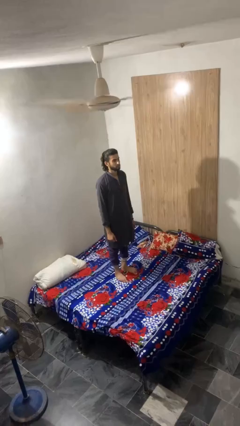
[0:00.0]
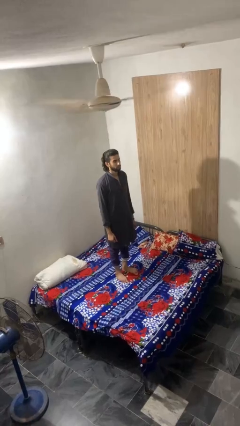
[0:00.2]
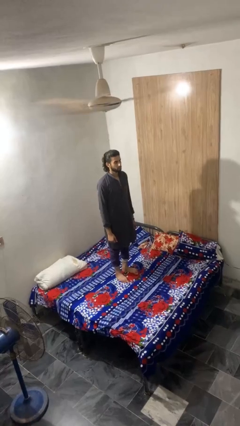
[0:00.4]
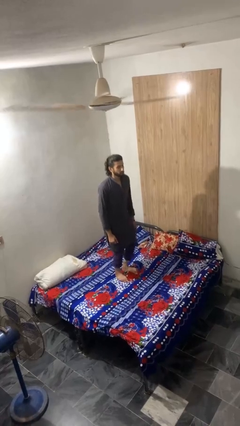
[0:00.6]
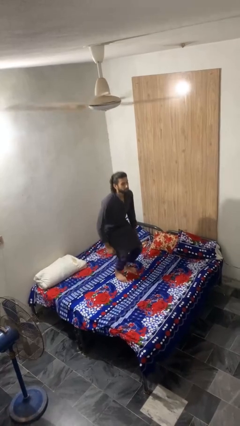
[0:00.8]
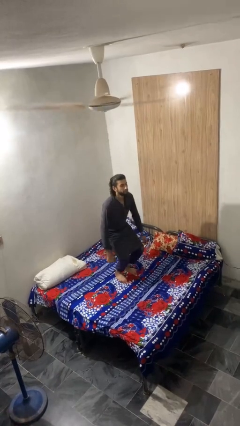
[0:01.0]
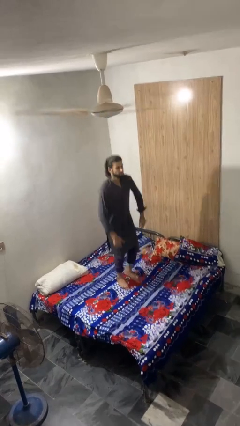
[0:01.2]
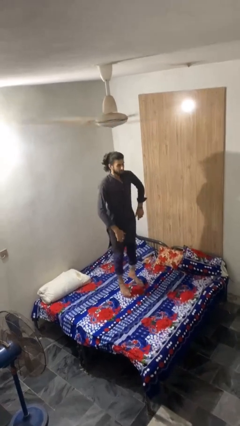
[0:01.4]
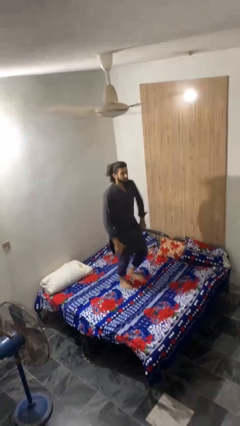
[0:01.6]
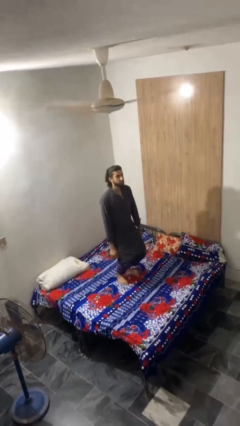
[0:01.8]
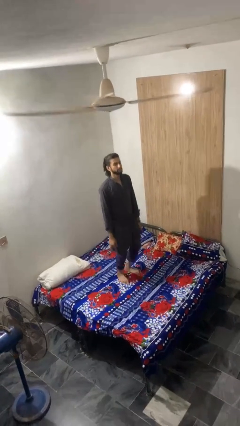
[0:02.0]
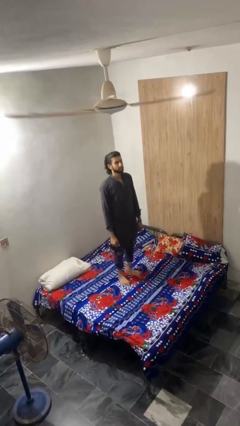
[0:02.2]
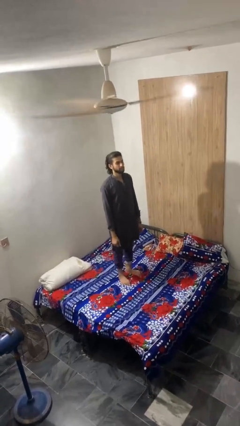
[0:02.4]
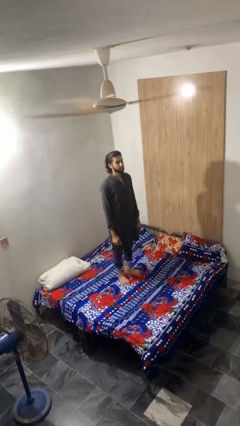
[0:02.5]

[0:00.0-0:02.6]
person jumps on bed

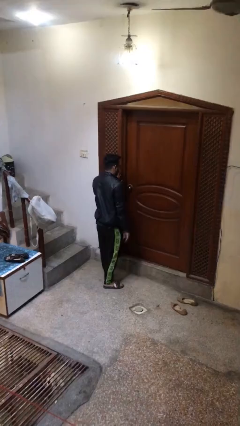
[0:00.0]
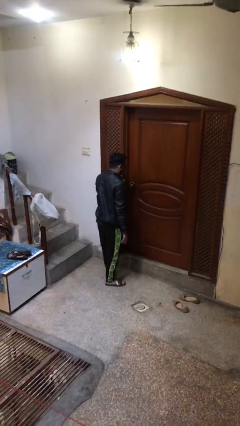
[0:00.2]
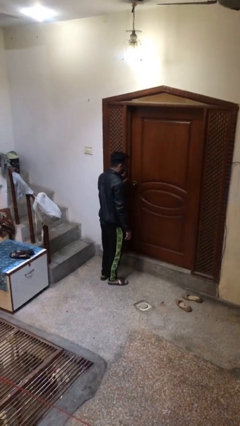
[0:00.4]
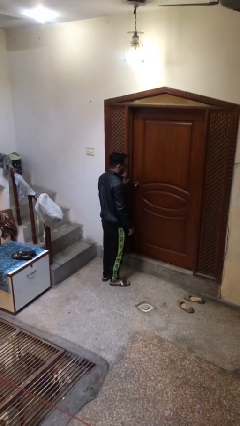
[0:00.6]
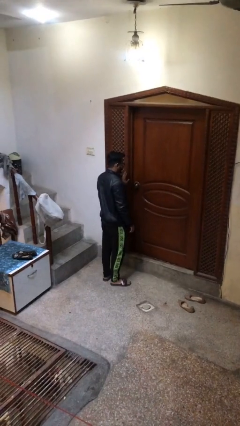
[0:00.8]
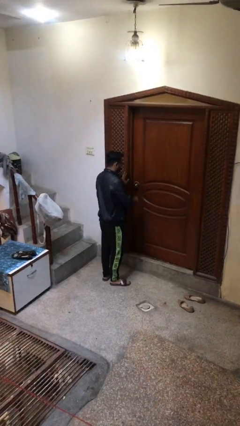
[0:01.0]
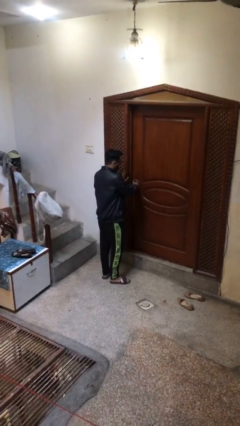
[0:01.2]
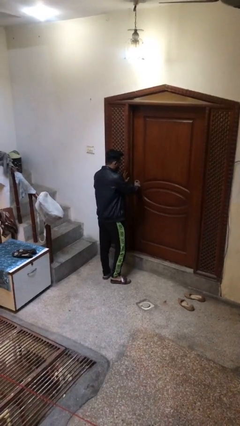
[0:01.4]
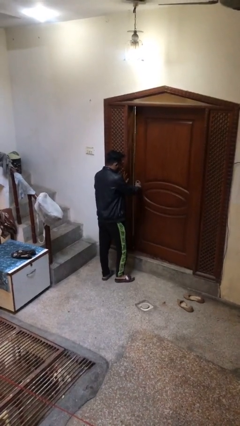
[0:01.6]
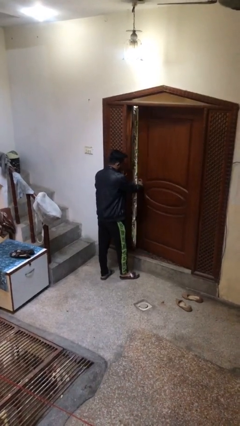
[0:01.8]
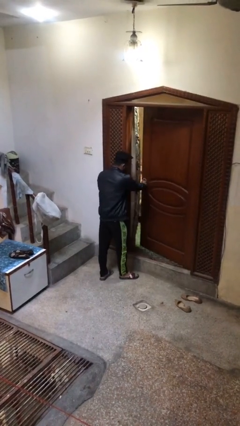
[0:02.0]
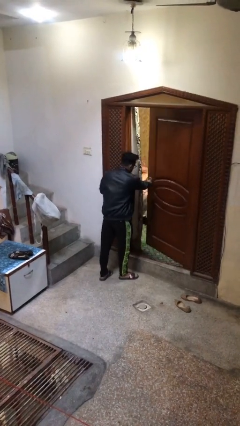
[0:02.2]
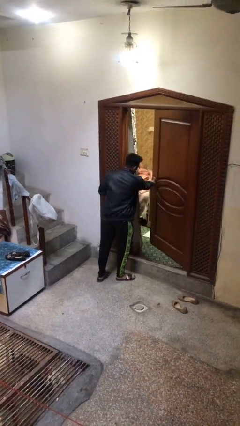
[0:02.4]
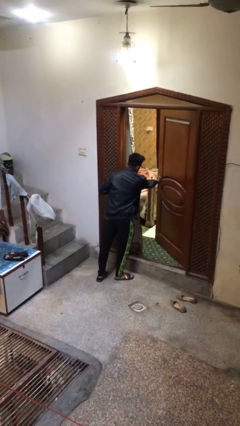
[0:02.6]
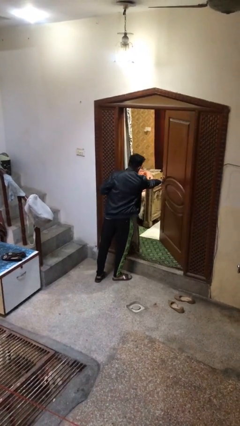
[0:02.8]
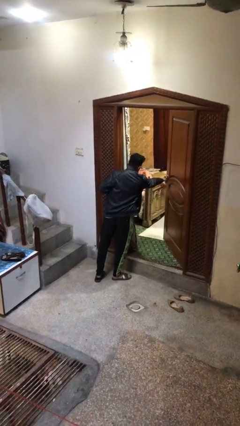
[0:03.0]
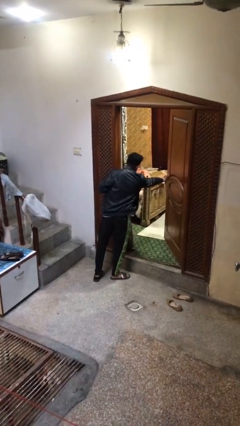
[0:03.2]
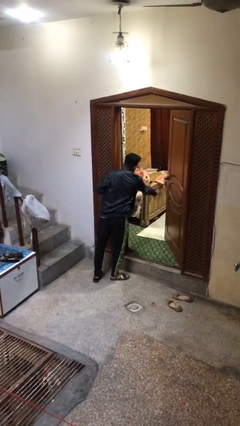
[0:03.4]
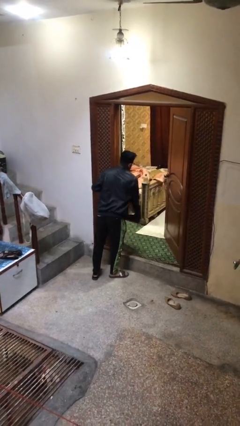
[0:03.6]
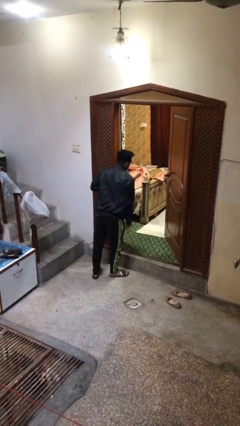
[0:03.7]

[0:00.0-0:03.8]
person opens facility door

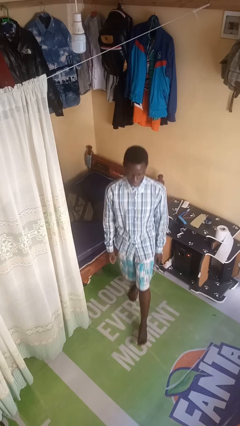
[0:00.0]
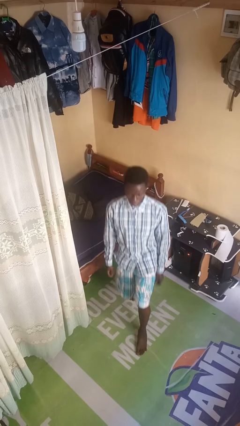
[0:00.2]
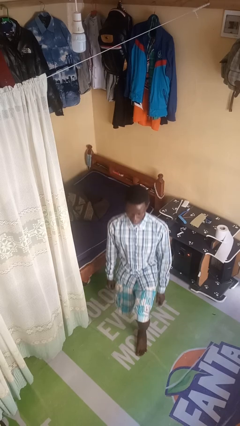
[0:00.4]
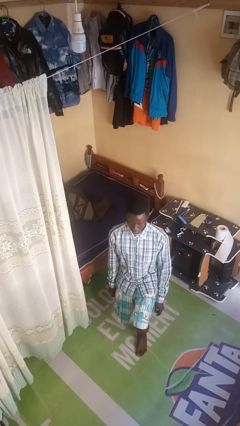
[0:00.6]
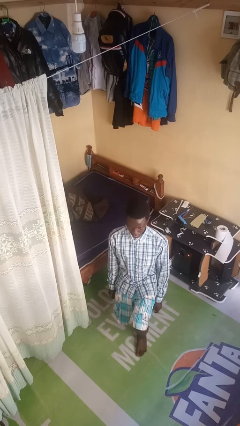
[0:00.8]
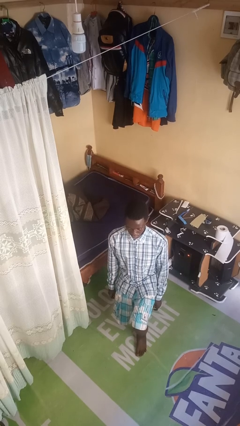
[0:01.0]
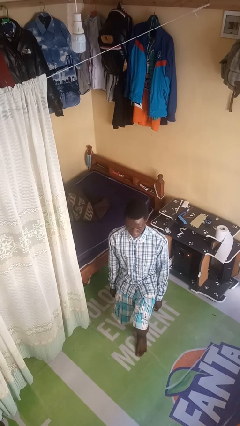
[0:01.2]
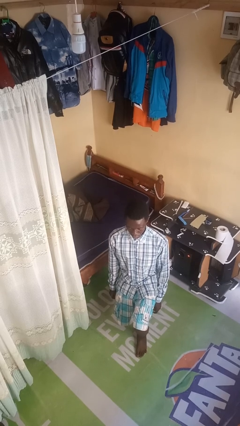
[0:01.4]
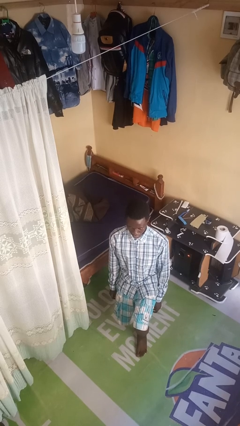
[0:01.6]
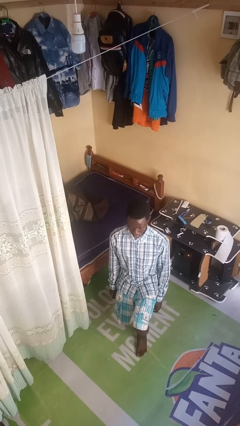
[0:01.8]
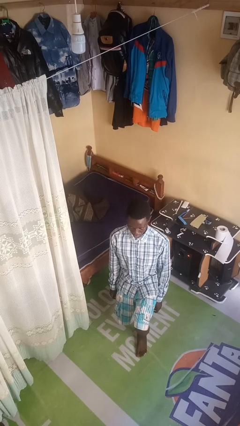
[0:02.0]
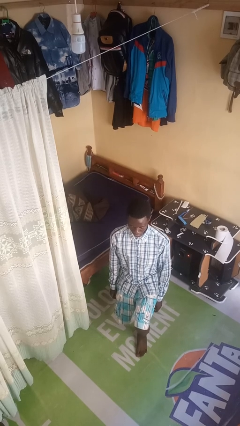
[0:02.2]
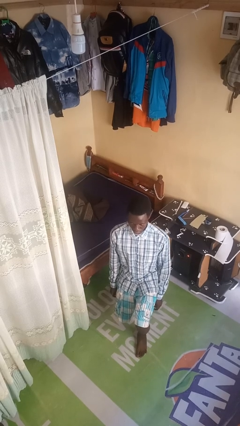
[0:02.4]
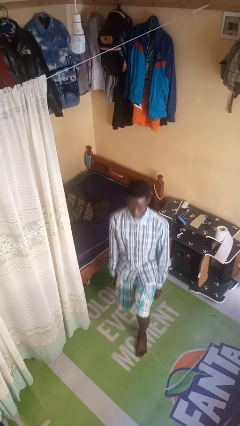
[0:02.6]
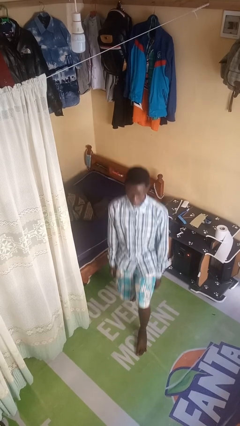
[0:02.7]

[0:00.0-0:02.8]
person exercises with lunges

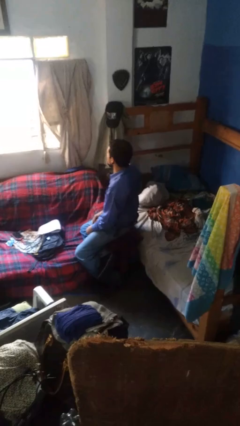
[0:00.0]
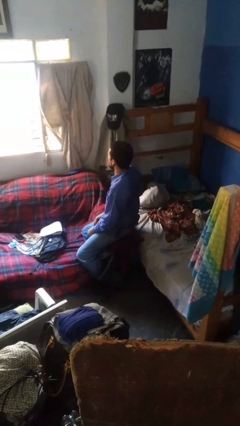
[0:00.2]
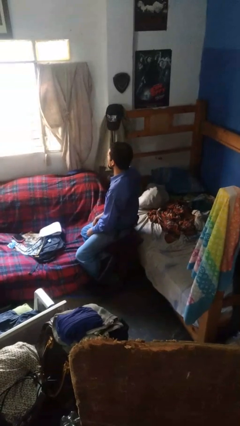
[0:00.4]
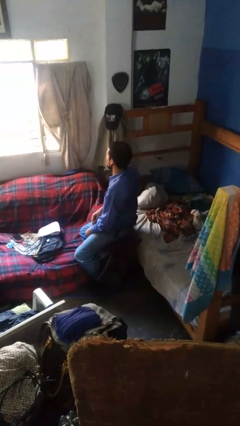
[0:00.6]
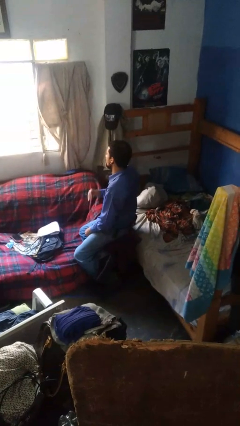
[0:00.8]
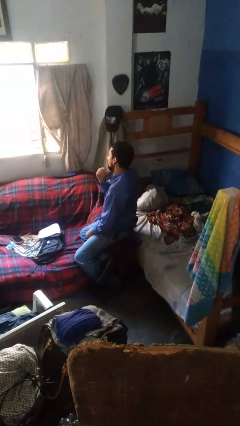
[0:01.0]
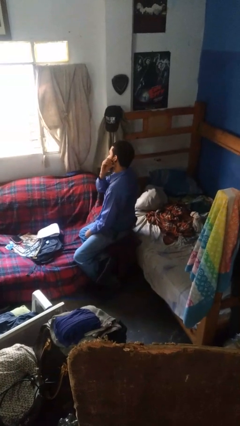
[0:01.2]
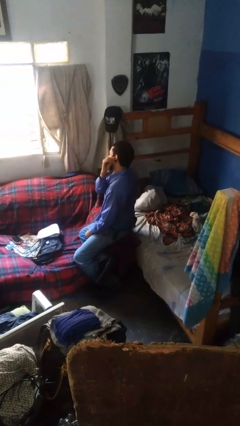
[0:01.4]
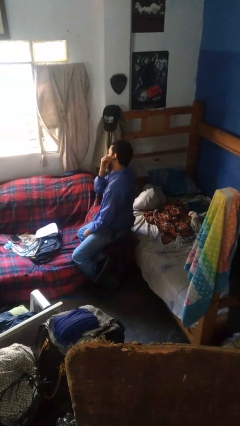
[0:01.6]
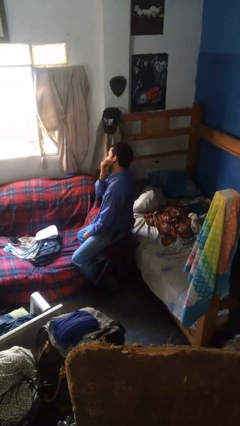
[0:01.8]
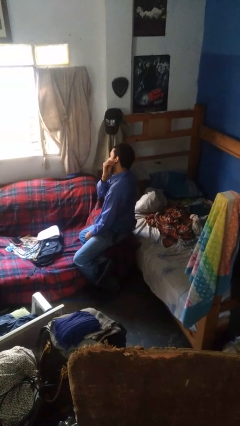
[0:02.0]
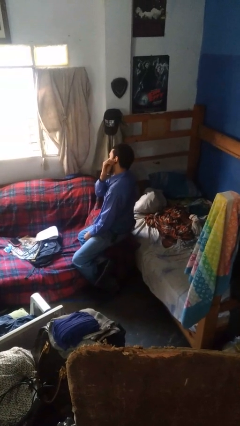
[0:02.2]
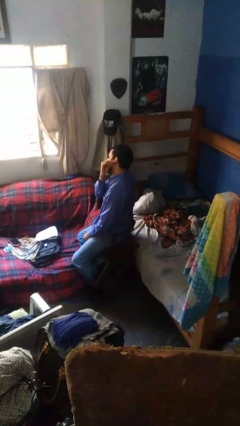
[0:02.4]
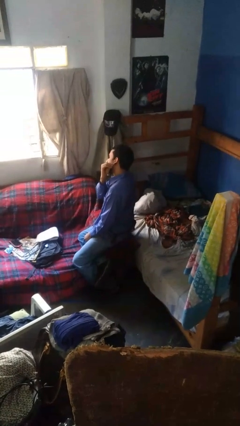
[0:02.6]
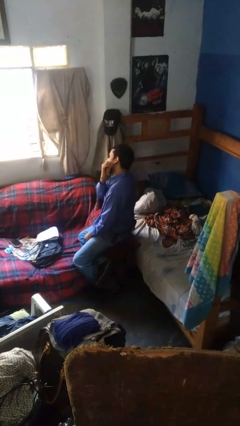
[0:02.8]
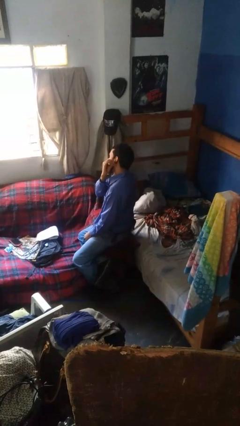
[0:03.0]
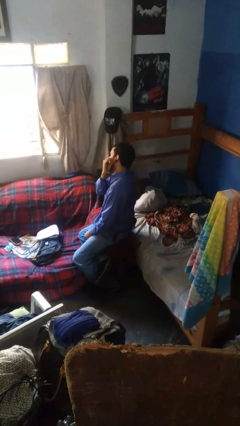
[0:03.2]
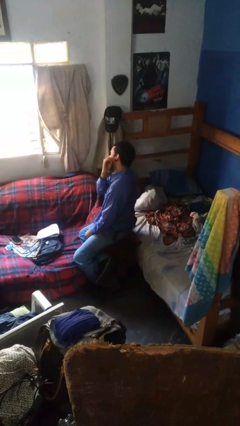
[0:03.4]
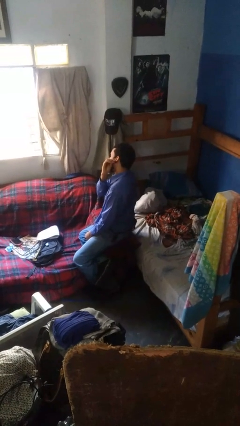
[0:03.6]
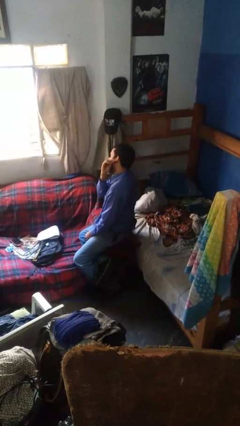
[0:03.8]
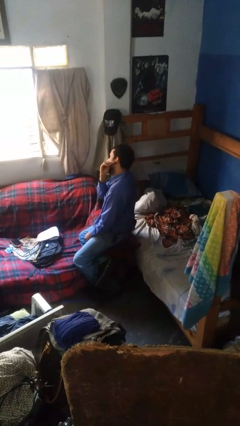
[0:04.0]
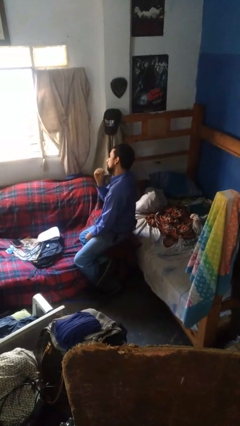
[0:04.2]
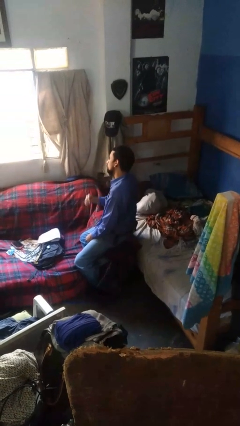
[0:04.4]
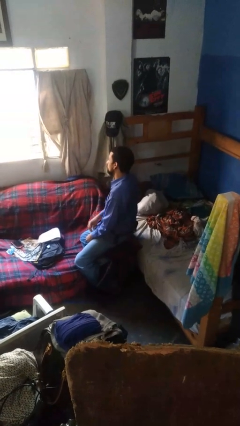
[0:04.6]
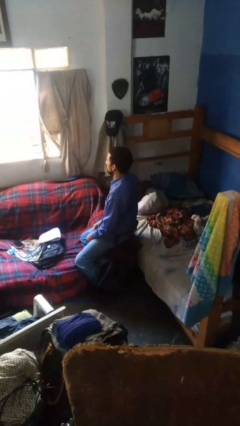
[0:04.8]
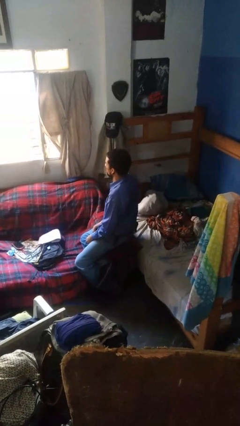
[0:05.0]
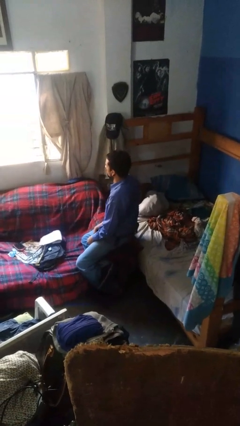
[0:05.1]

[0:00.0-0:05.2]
person touches earlobe

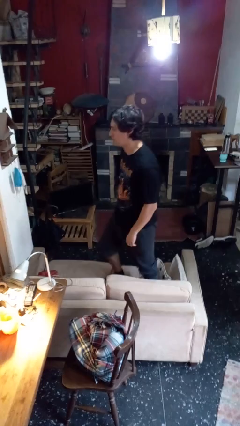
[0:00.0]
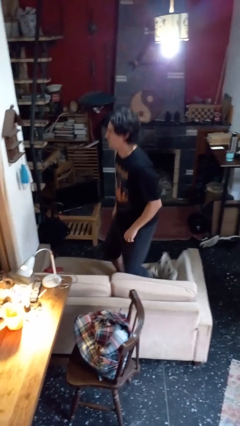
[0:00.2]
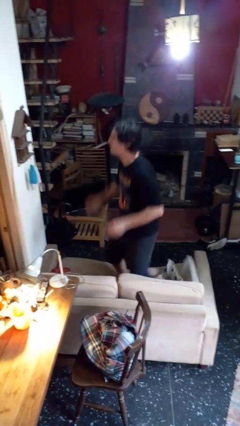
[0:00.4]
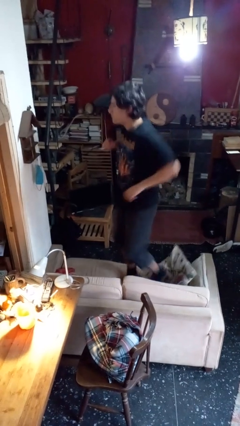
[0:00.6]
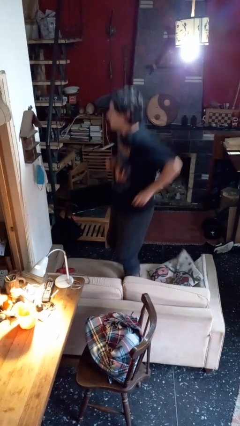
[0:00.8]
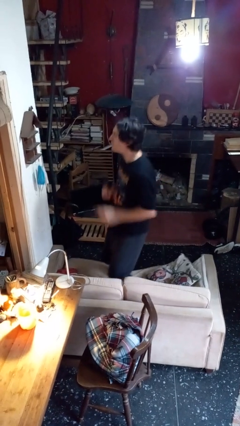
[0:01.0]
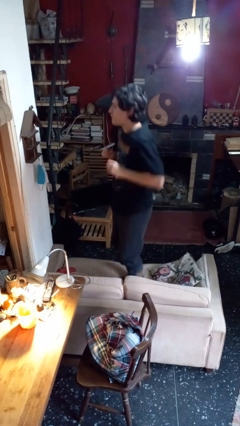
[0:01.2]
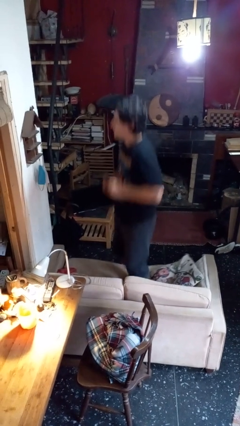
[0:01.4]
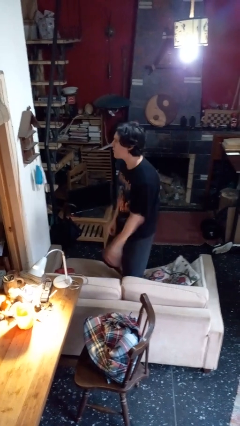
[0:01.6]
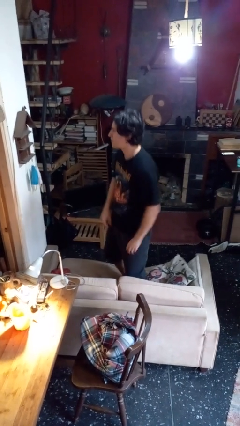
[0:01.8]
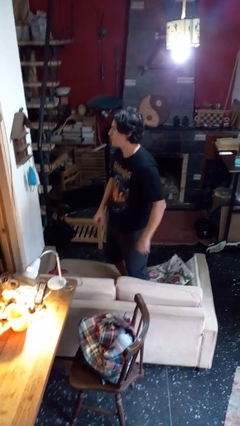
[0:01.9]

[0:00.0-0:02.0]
person jumps on couch

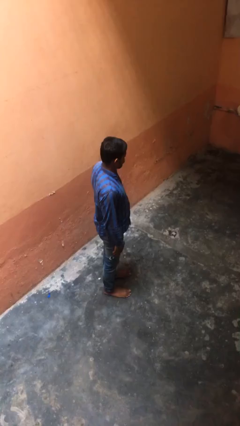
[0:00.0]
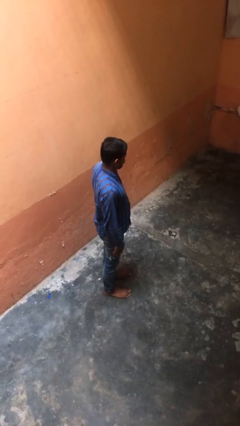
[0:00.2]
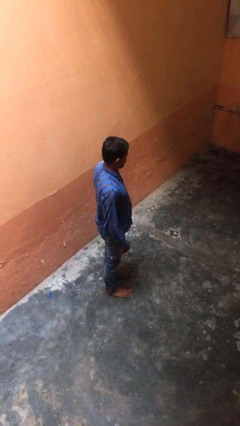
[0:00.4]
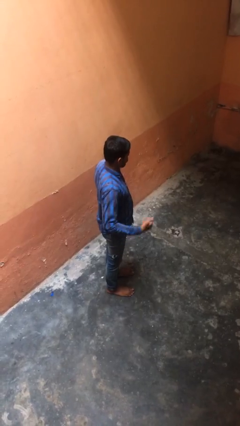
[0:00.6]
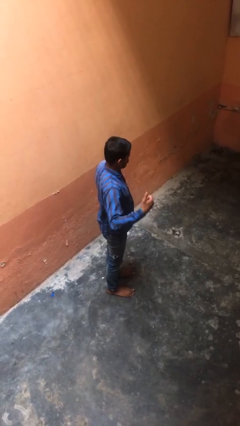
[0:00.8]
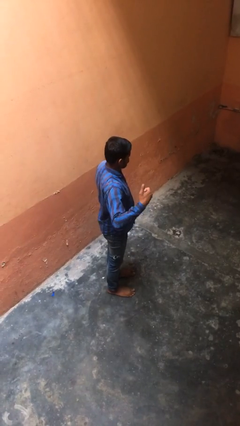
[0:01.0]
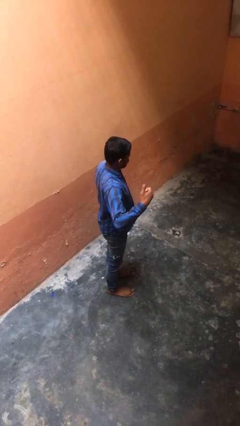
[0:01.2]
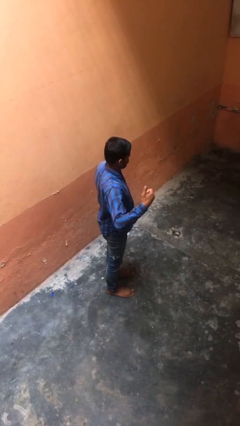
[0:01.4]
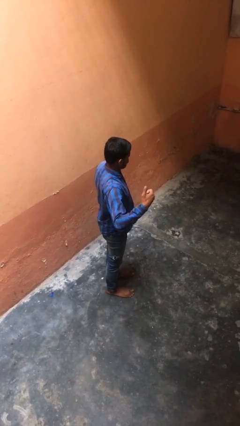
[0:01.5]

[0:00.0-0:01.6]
person gestures hang loose
